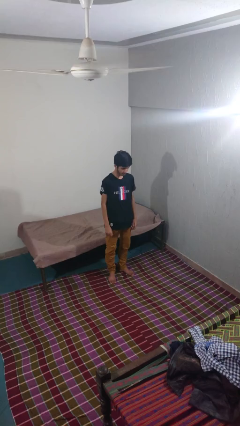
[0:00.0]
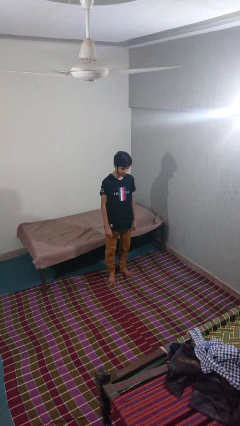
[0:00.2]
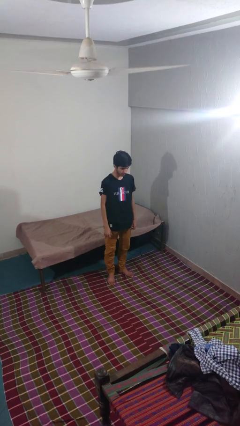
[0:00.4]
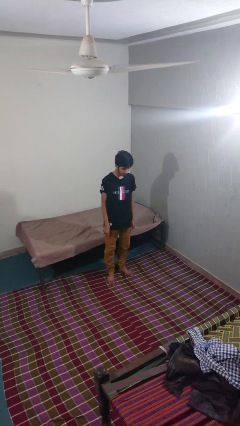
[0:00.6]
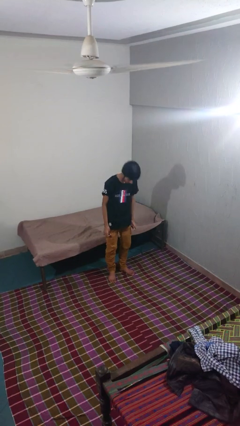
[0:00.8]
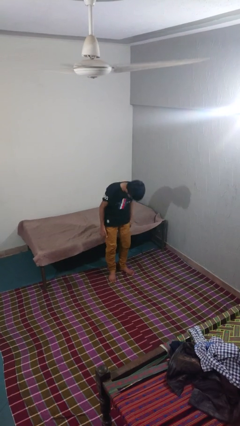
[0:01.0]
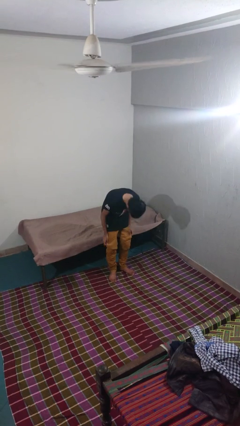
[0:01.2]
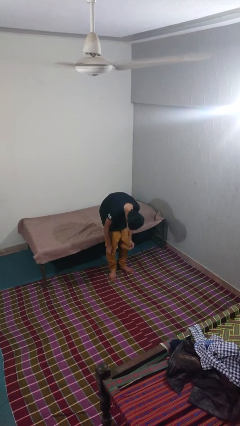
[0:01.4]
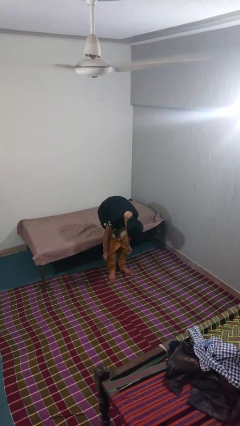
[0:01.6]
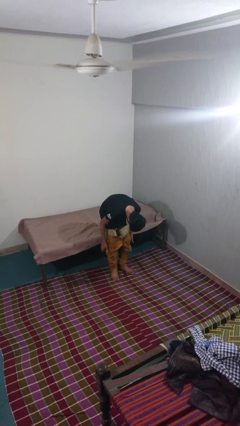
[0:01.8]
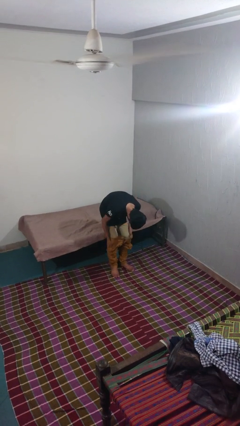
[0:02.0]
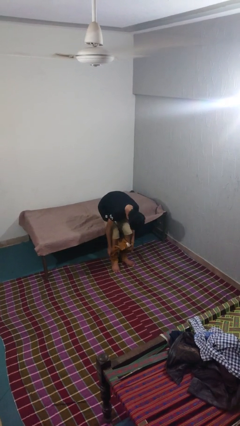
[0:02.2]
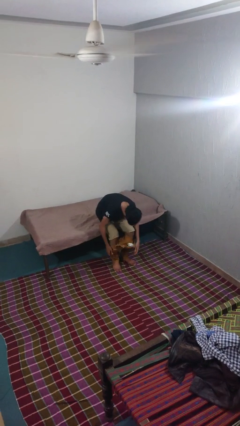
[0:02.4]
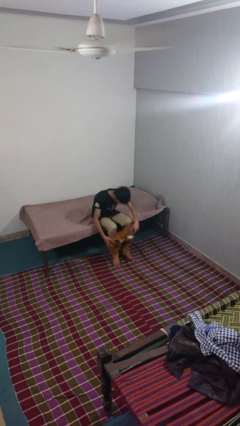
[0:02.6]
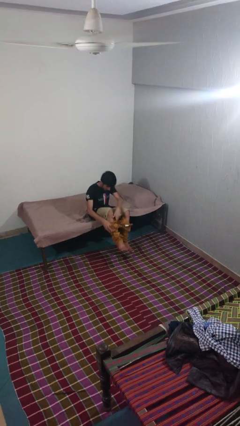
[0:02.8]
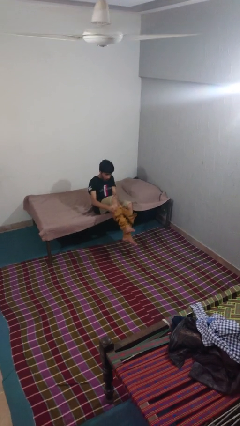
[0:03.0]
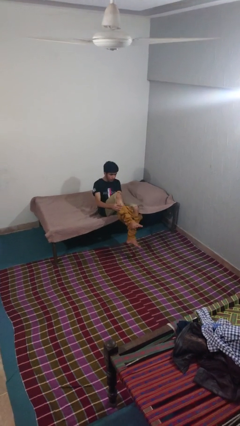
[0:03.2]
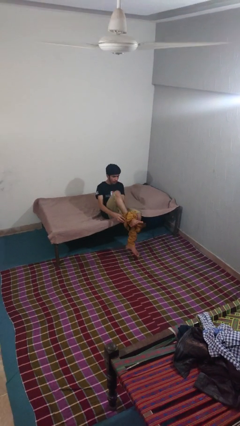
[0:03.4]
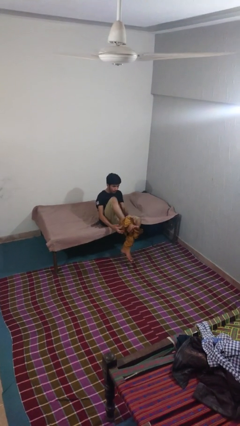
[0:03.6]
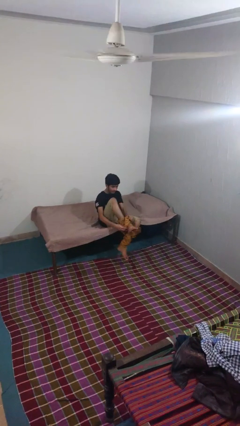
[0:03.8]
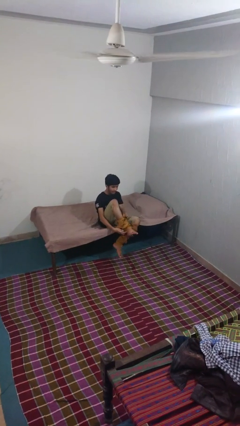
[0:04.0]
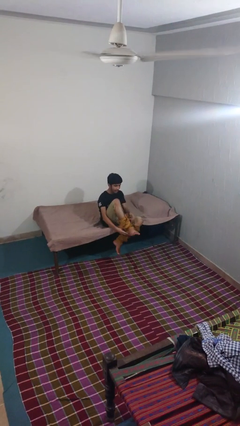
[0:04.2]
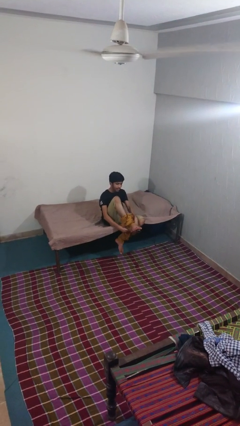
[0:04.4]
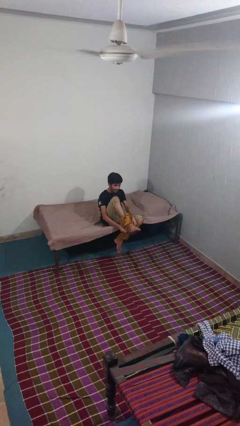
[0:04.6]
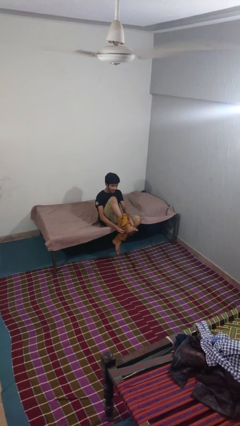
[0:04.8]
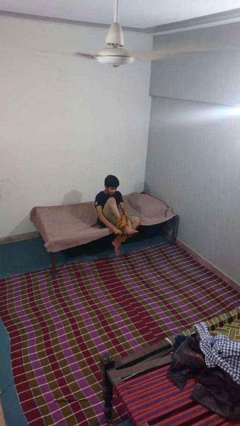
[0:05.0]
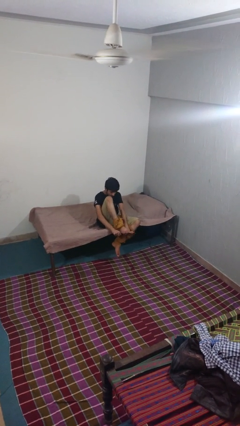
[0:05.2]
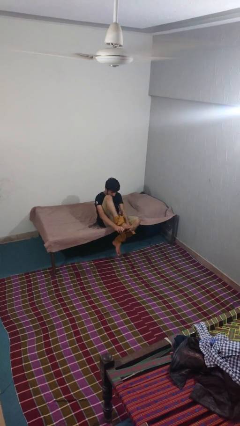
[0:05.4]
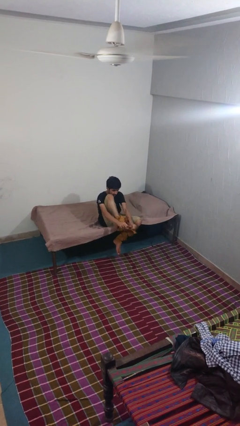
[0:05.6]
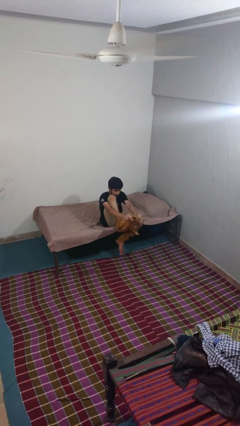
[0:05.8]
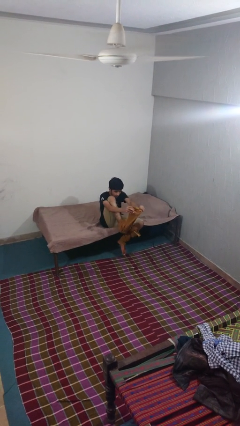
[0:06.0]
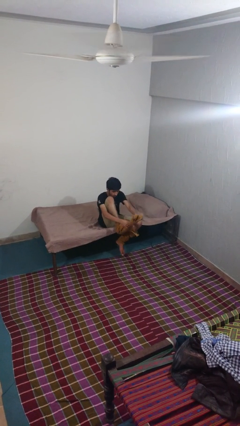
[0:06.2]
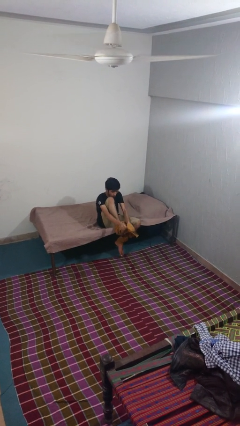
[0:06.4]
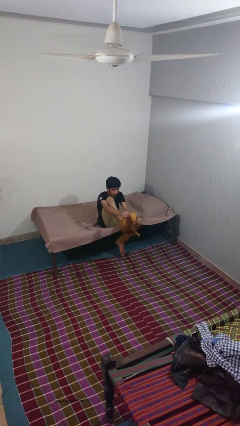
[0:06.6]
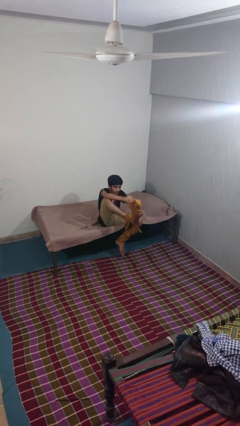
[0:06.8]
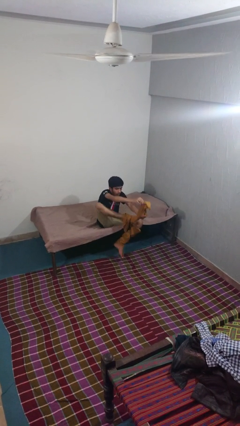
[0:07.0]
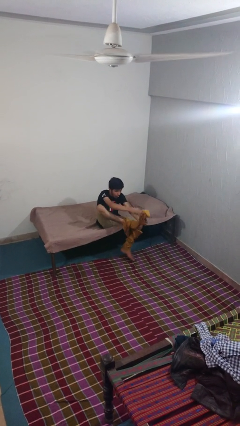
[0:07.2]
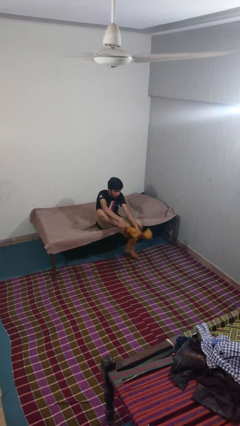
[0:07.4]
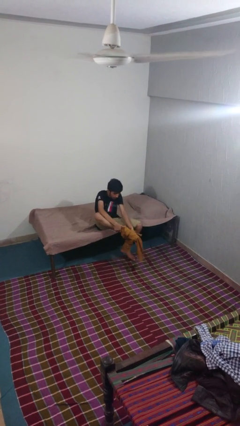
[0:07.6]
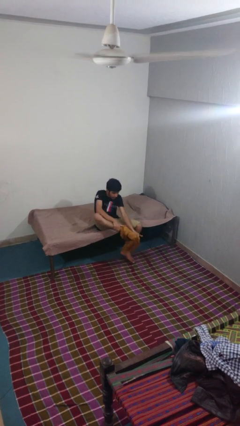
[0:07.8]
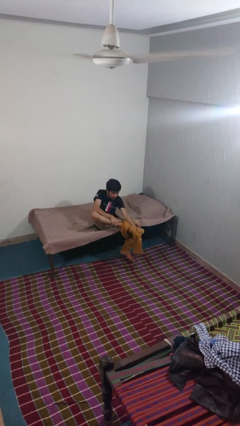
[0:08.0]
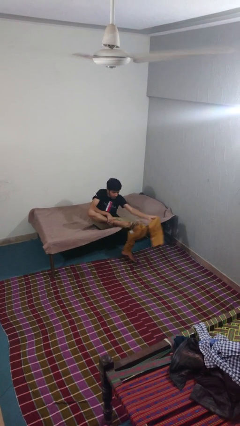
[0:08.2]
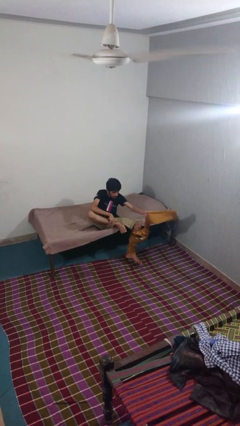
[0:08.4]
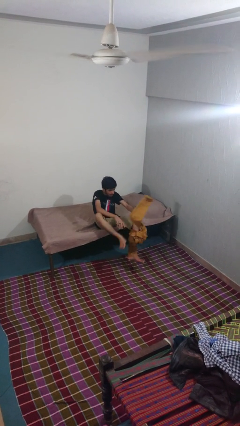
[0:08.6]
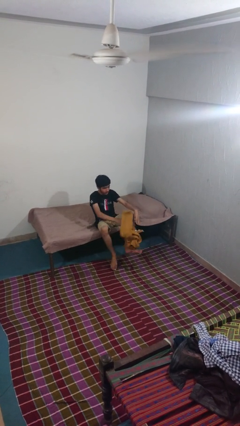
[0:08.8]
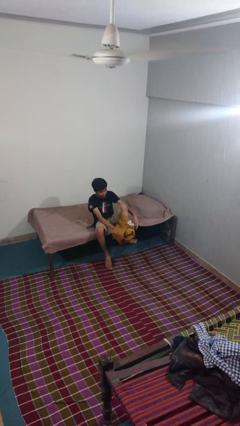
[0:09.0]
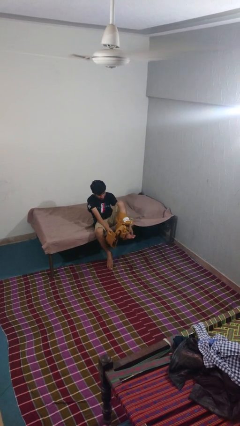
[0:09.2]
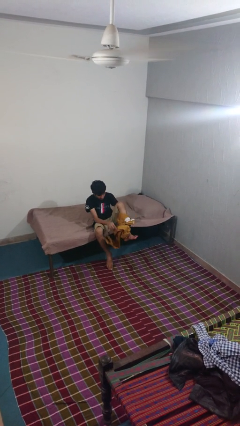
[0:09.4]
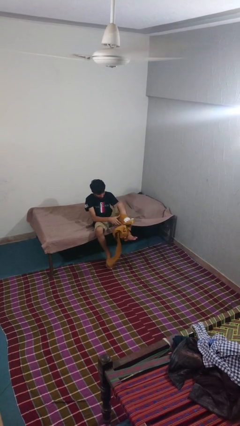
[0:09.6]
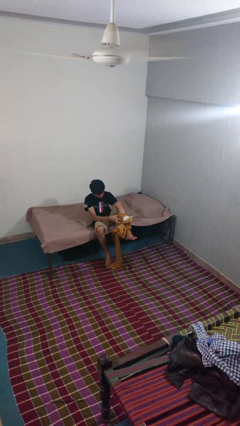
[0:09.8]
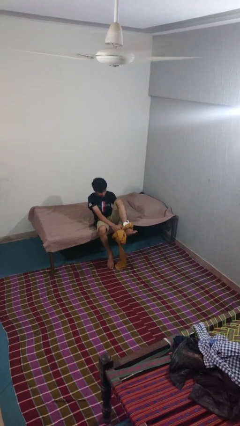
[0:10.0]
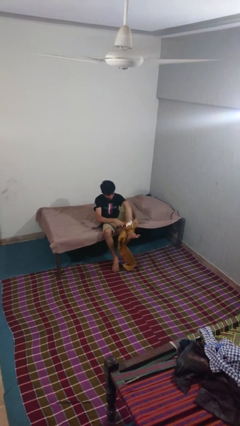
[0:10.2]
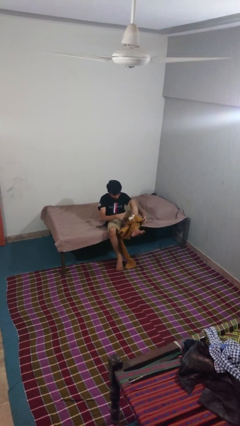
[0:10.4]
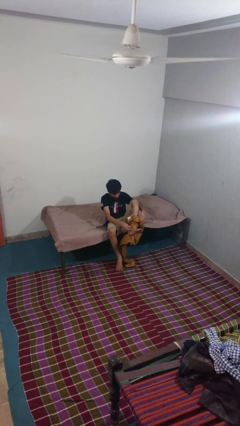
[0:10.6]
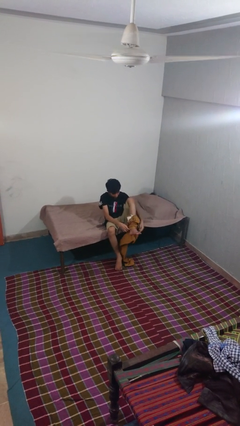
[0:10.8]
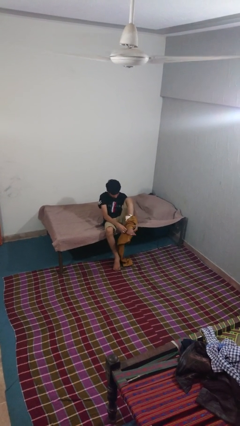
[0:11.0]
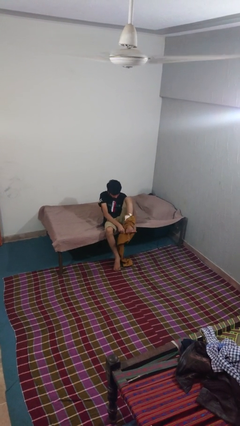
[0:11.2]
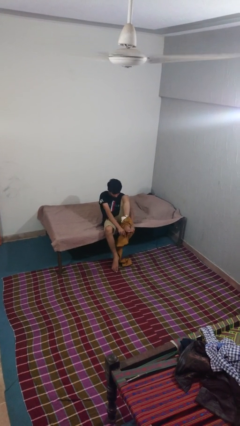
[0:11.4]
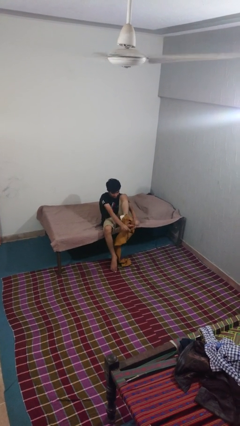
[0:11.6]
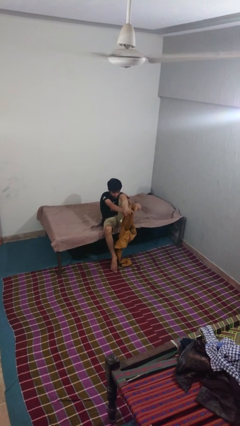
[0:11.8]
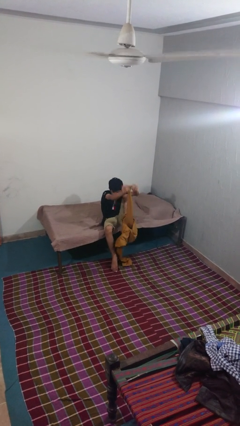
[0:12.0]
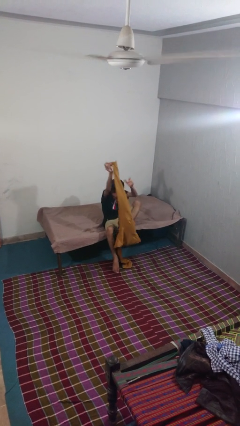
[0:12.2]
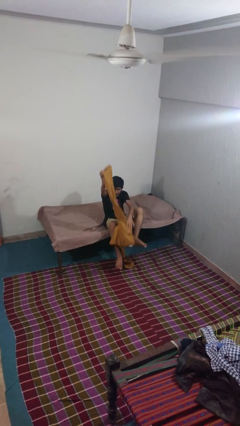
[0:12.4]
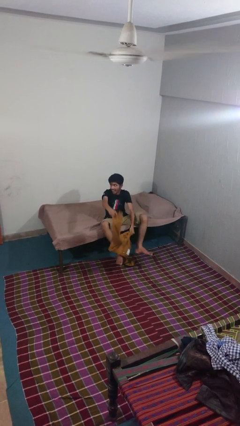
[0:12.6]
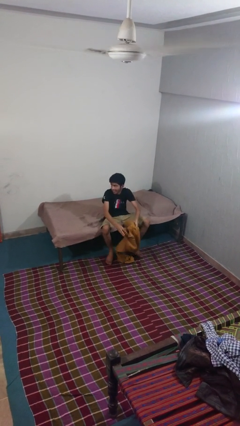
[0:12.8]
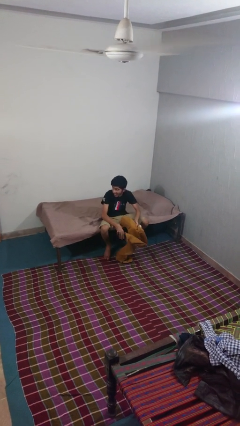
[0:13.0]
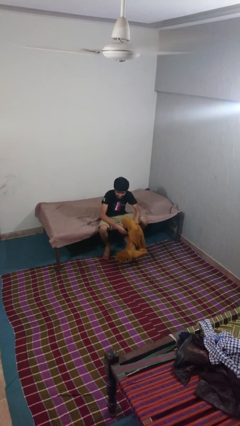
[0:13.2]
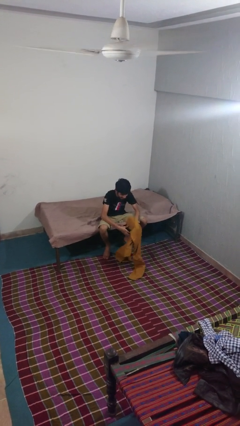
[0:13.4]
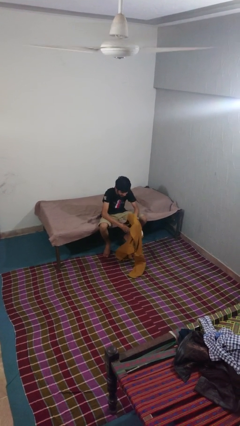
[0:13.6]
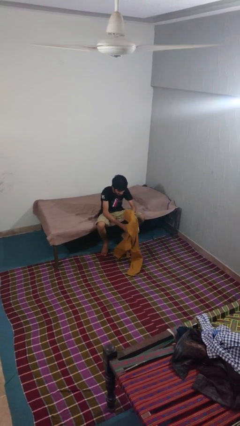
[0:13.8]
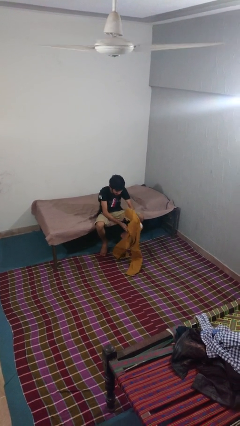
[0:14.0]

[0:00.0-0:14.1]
person takes off pants

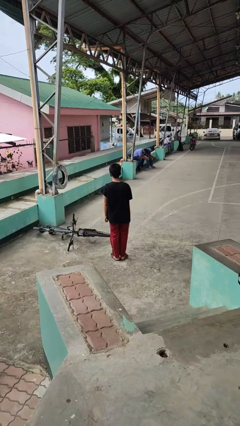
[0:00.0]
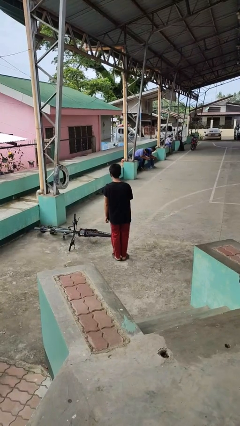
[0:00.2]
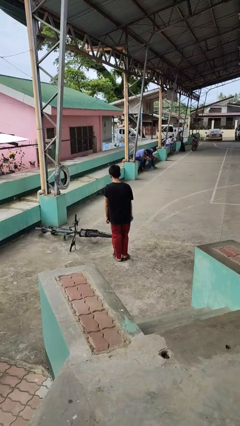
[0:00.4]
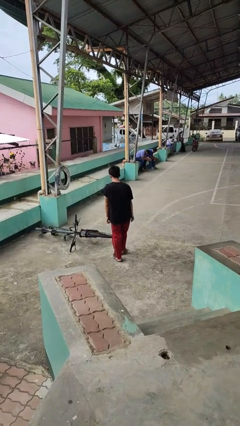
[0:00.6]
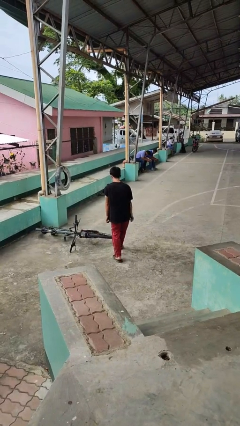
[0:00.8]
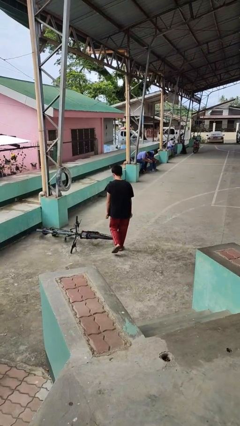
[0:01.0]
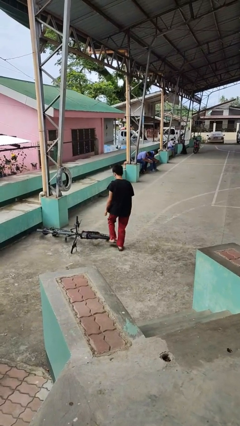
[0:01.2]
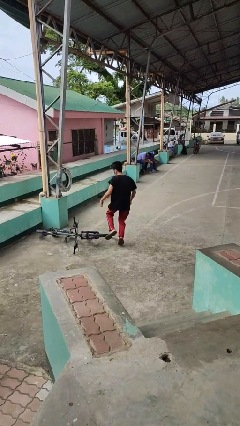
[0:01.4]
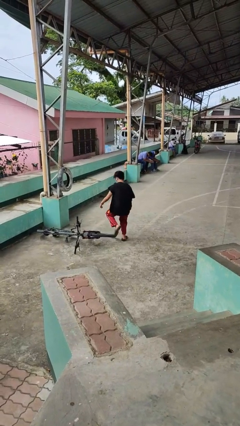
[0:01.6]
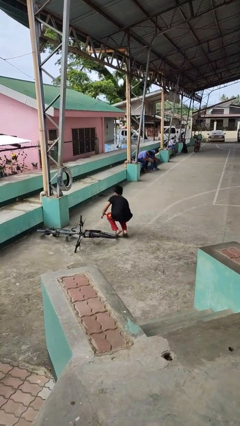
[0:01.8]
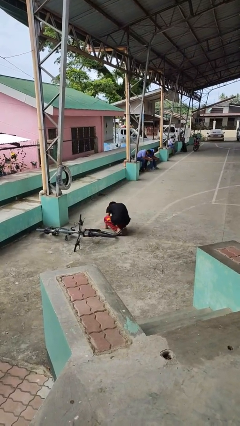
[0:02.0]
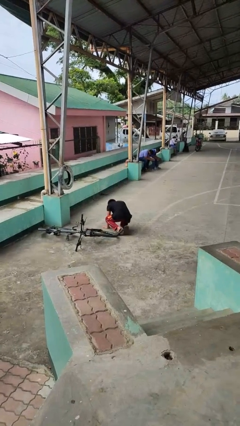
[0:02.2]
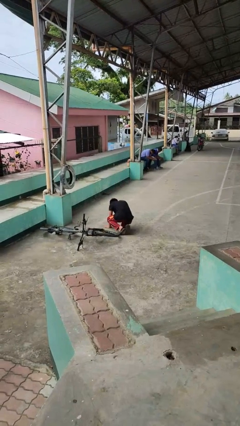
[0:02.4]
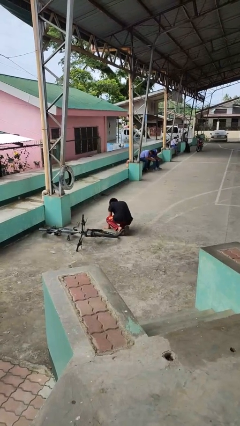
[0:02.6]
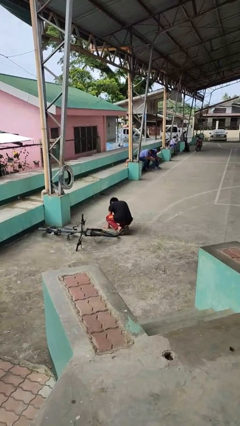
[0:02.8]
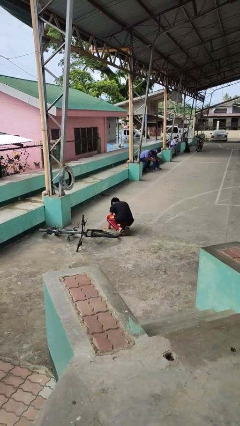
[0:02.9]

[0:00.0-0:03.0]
person trips on object on floor

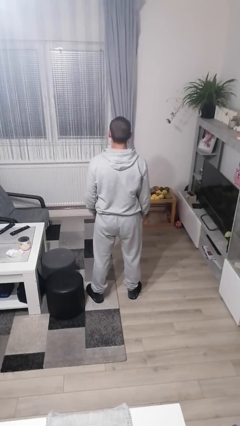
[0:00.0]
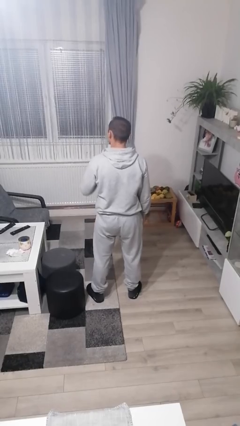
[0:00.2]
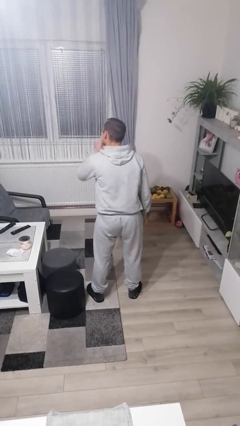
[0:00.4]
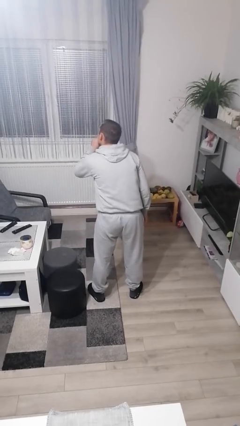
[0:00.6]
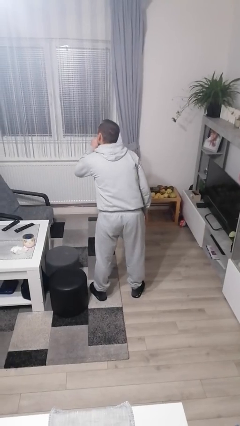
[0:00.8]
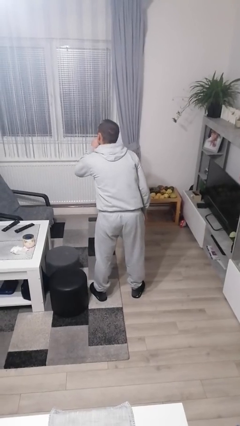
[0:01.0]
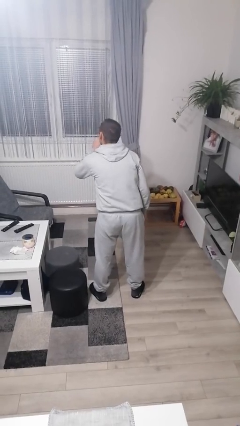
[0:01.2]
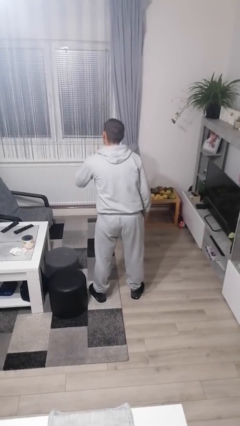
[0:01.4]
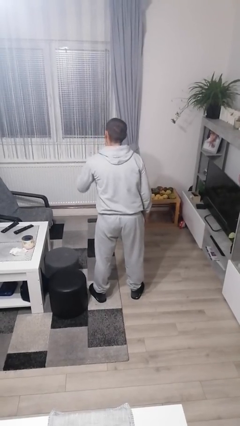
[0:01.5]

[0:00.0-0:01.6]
person gestures be quiet
